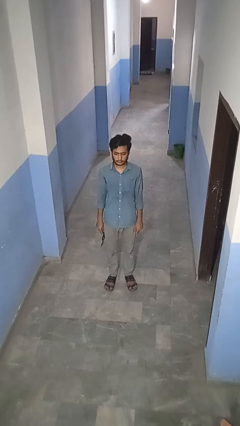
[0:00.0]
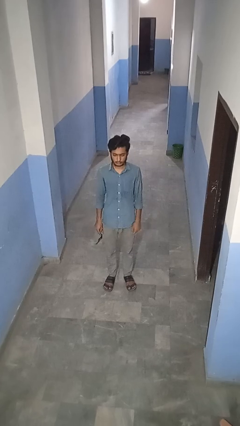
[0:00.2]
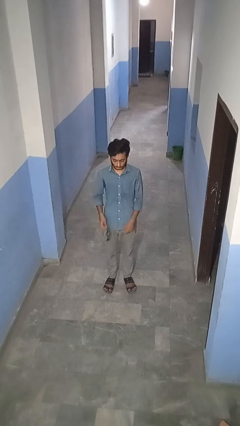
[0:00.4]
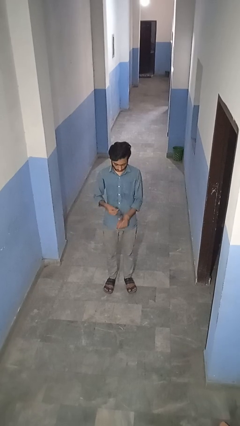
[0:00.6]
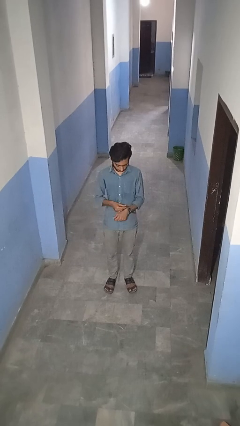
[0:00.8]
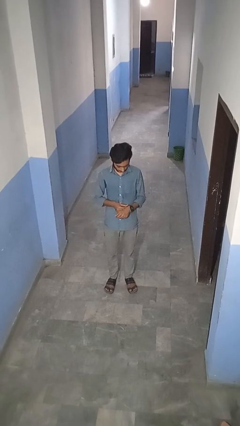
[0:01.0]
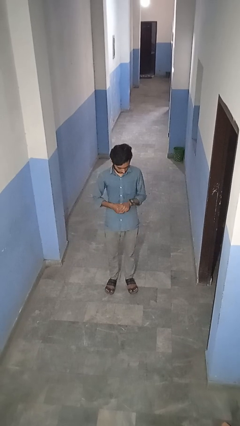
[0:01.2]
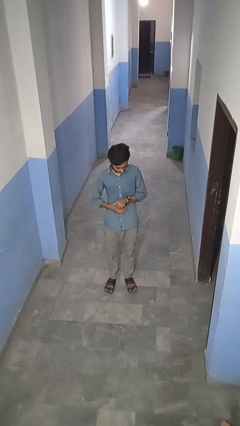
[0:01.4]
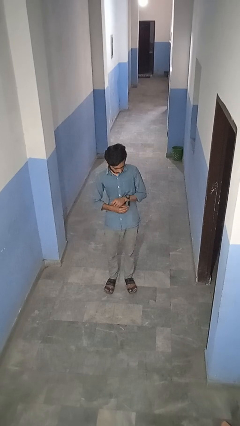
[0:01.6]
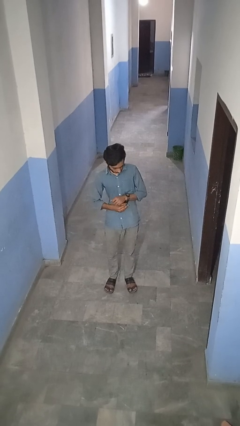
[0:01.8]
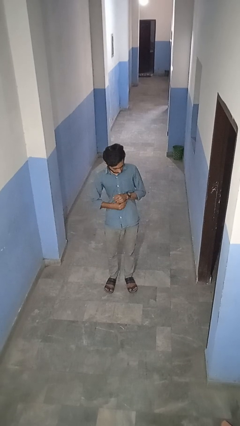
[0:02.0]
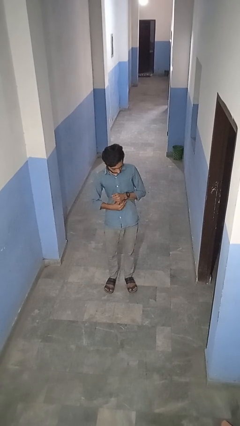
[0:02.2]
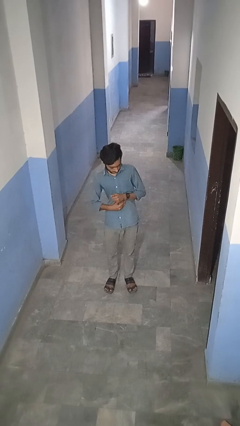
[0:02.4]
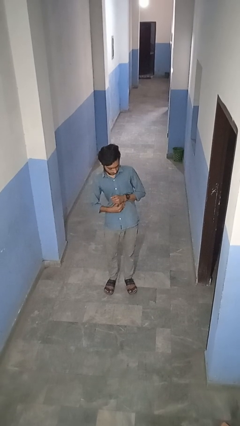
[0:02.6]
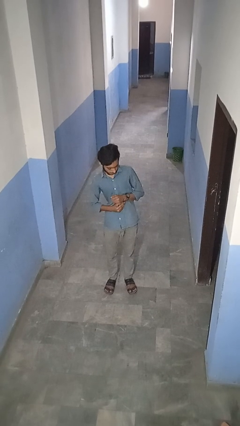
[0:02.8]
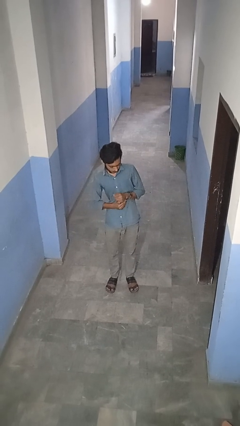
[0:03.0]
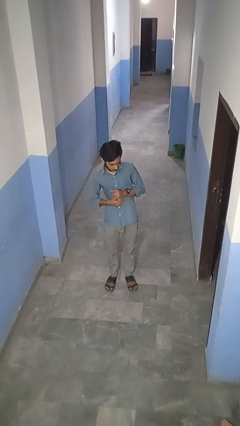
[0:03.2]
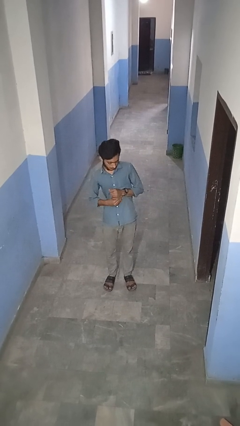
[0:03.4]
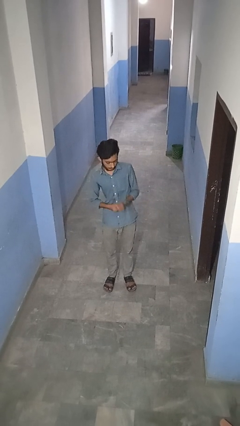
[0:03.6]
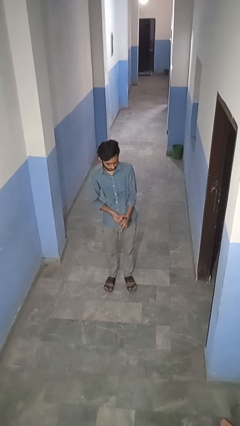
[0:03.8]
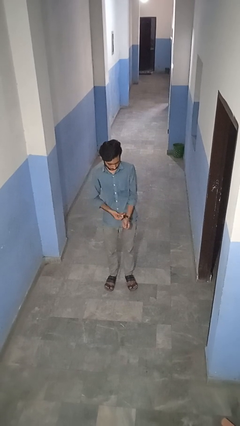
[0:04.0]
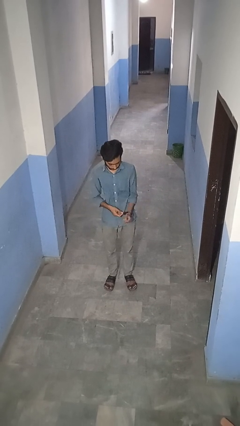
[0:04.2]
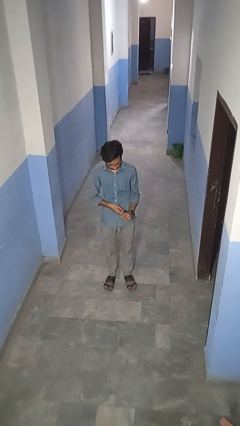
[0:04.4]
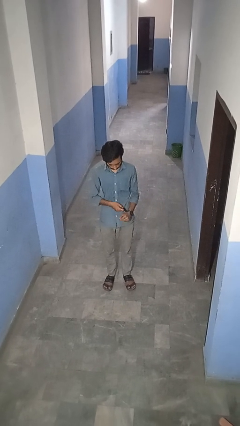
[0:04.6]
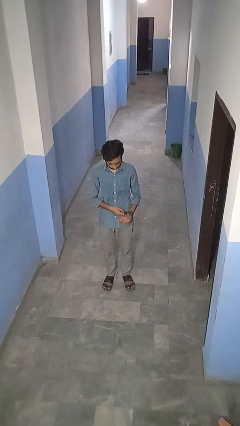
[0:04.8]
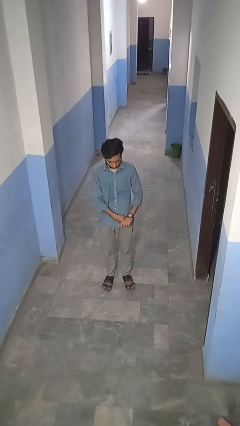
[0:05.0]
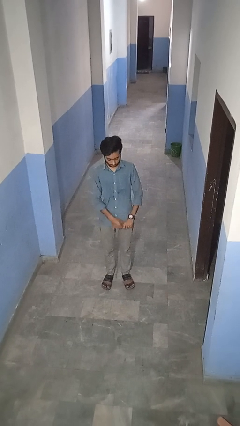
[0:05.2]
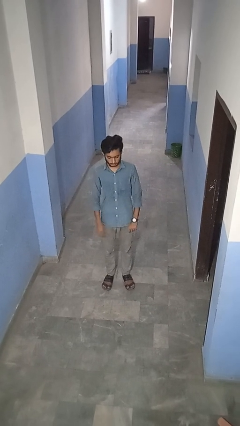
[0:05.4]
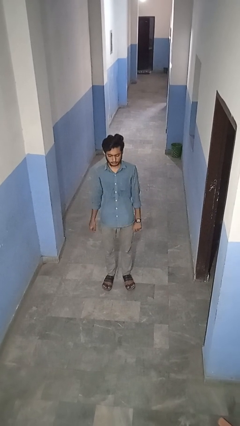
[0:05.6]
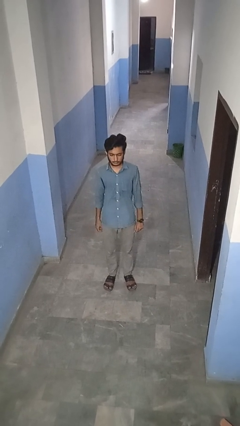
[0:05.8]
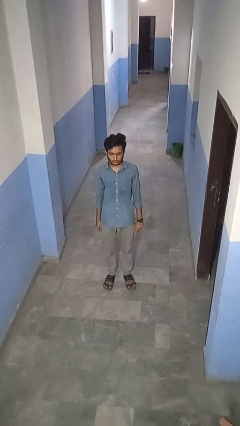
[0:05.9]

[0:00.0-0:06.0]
person puts on wristwatch

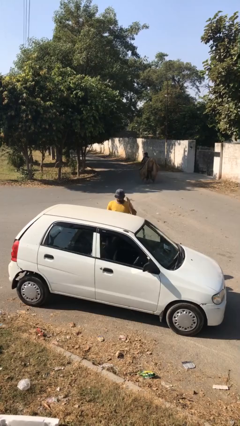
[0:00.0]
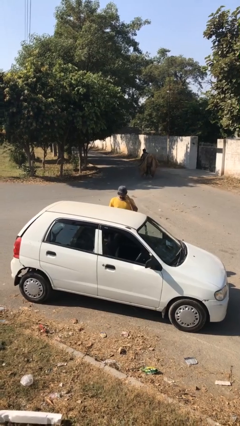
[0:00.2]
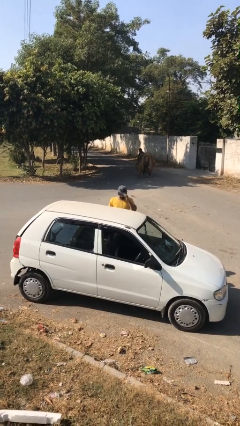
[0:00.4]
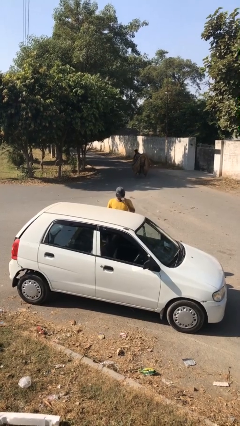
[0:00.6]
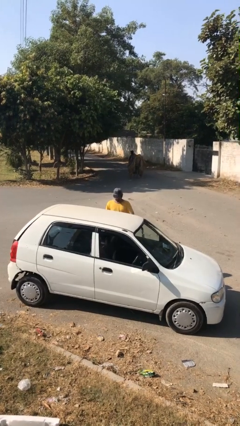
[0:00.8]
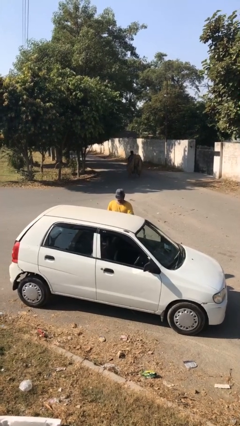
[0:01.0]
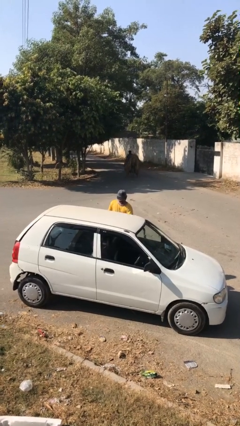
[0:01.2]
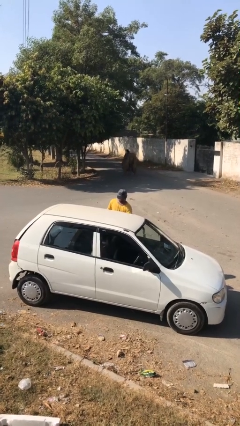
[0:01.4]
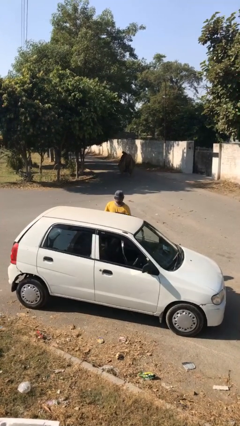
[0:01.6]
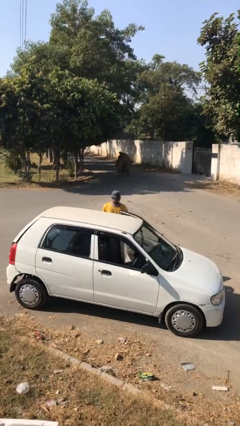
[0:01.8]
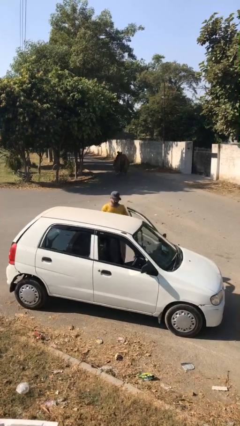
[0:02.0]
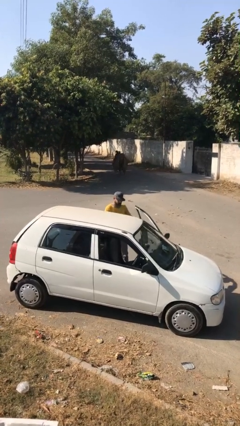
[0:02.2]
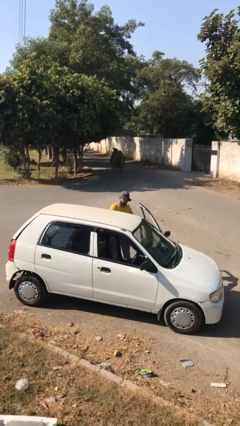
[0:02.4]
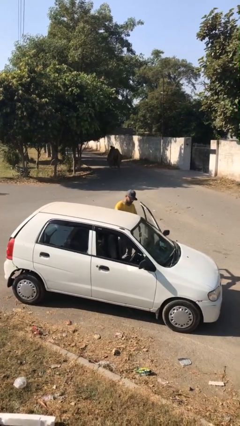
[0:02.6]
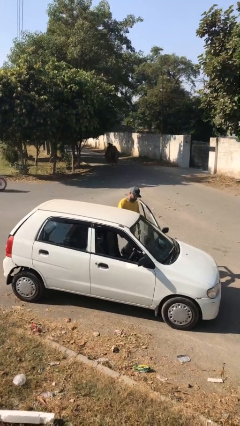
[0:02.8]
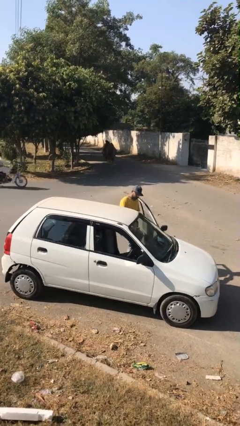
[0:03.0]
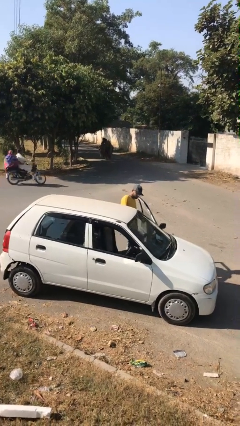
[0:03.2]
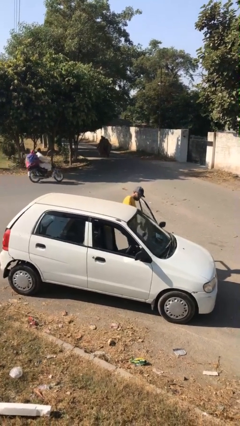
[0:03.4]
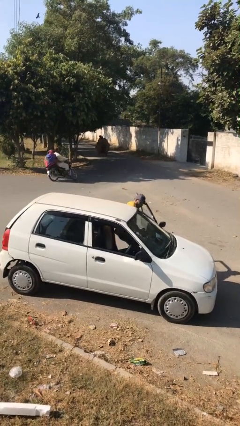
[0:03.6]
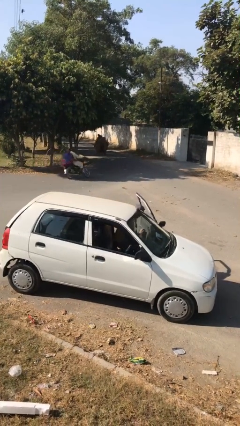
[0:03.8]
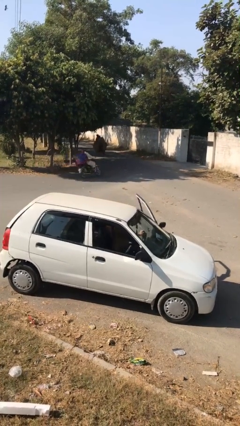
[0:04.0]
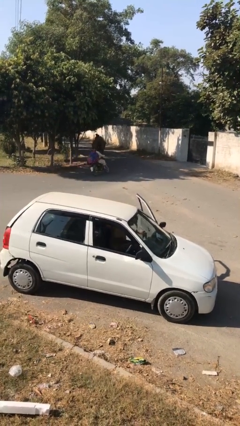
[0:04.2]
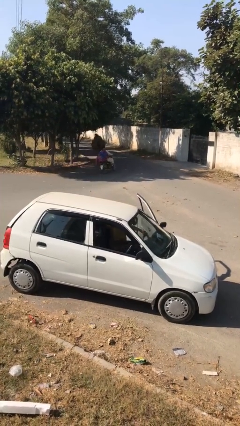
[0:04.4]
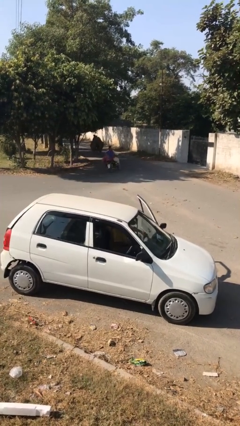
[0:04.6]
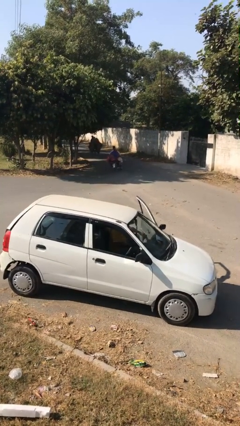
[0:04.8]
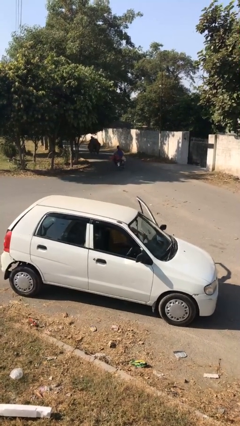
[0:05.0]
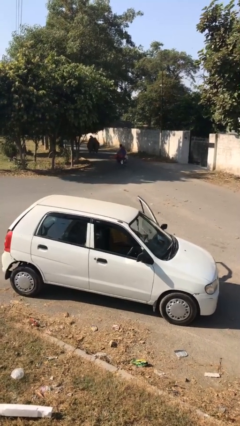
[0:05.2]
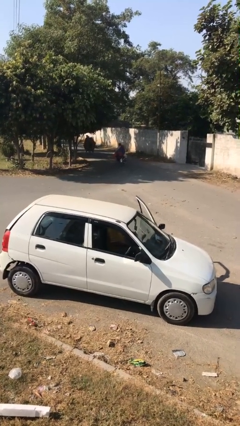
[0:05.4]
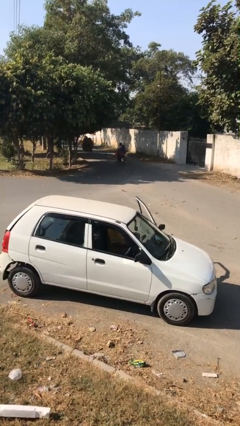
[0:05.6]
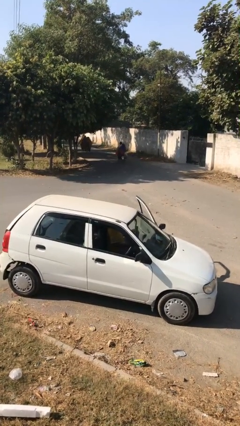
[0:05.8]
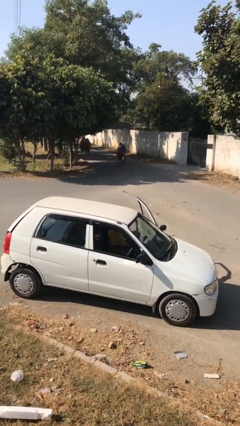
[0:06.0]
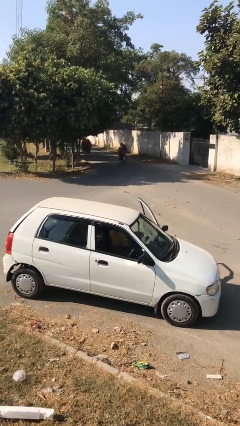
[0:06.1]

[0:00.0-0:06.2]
person enters car

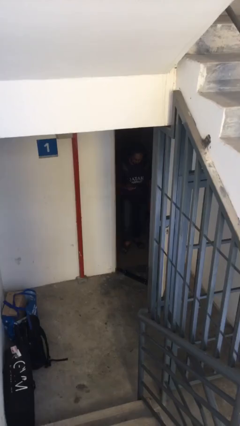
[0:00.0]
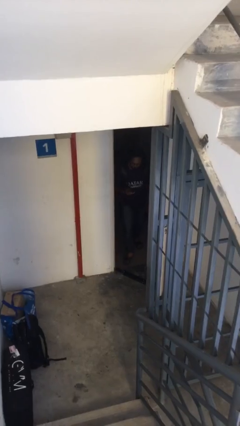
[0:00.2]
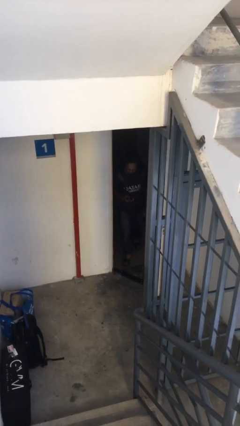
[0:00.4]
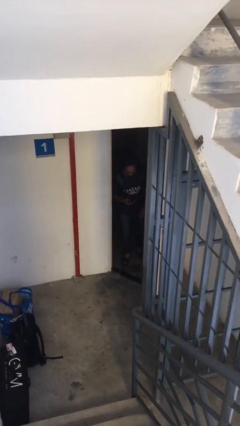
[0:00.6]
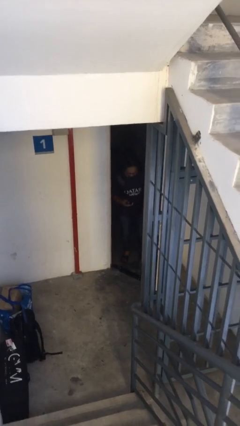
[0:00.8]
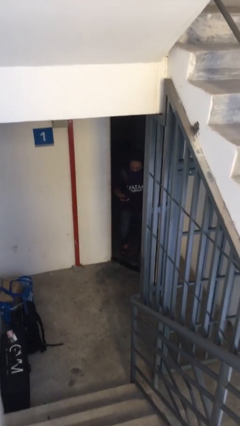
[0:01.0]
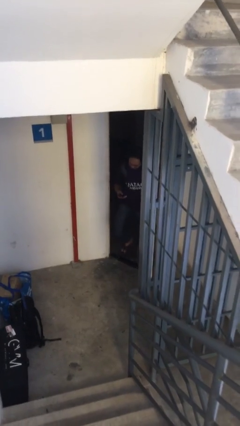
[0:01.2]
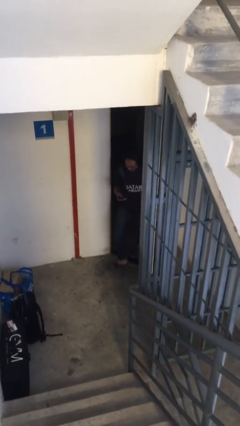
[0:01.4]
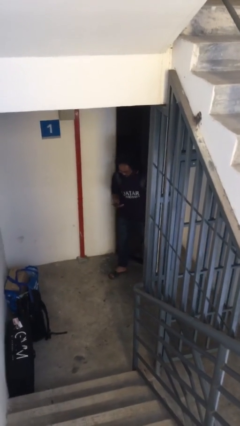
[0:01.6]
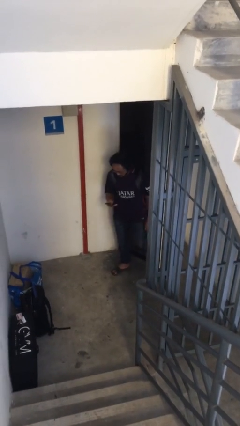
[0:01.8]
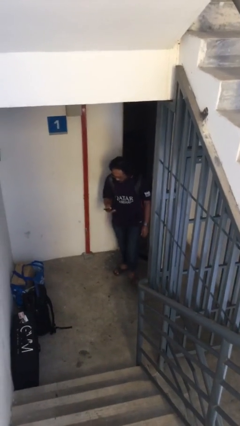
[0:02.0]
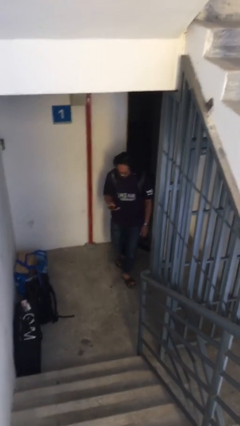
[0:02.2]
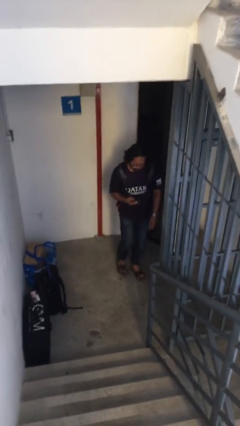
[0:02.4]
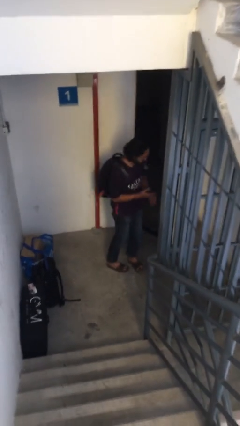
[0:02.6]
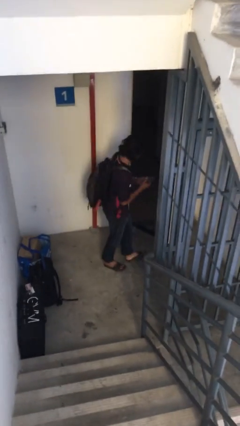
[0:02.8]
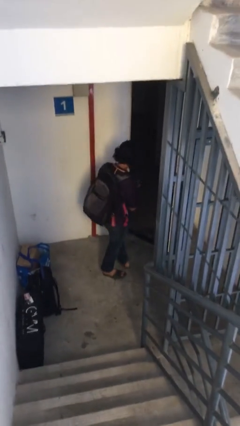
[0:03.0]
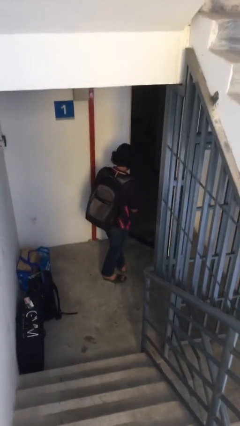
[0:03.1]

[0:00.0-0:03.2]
person enters scene through structure

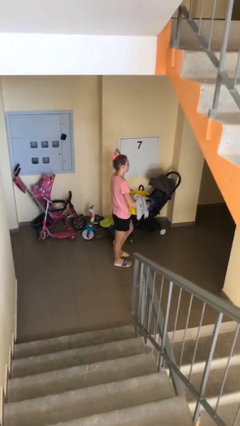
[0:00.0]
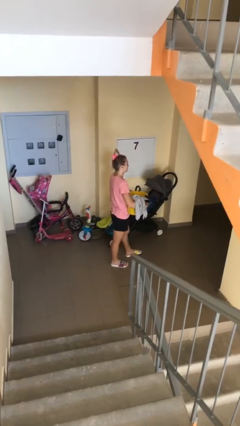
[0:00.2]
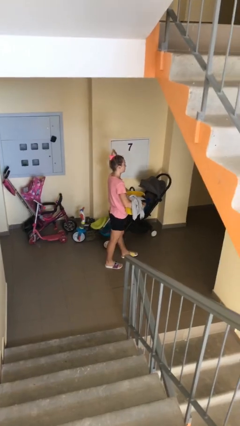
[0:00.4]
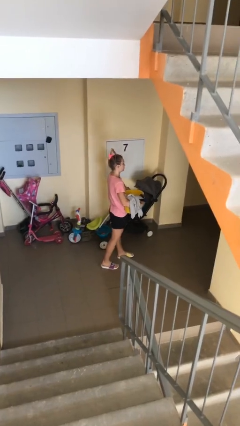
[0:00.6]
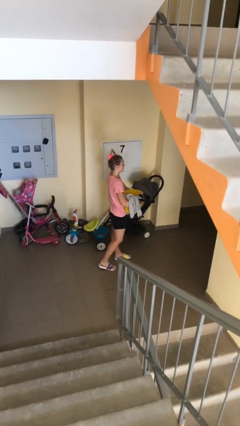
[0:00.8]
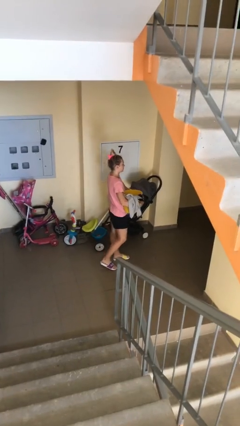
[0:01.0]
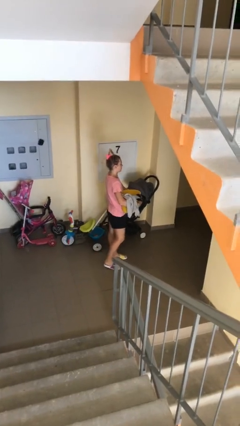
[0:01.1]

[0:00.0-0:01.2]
person carries laundry basket

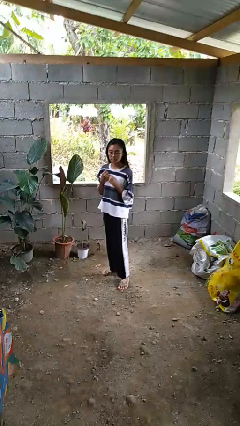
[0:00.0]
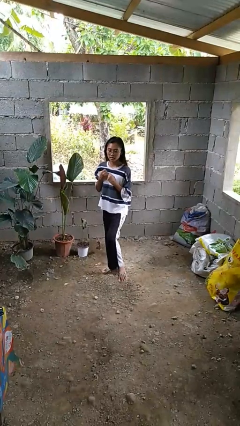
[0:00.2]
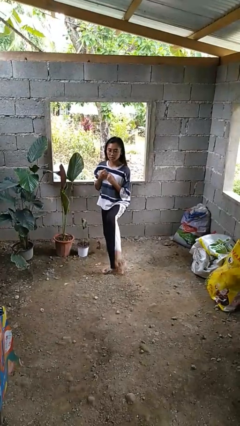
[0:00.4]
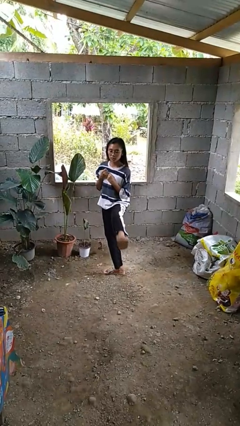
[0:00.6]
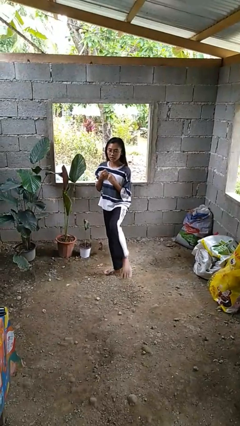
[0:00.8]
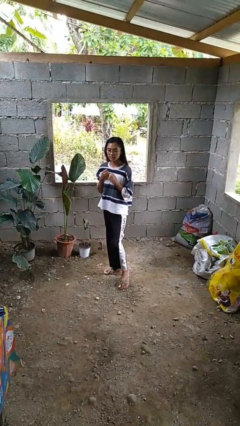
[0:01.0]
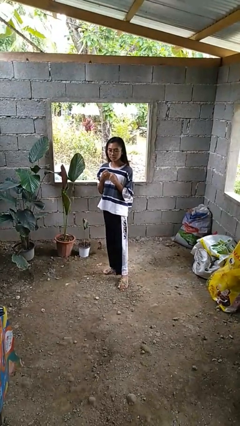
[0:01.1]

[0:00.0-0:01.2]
person karate kicks
